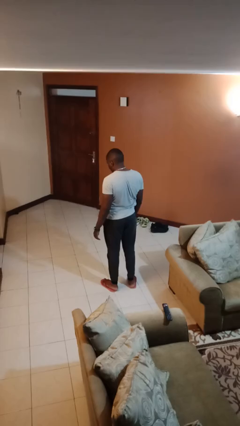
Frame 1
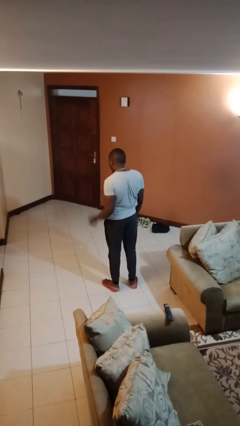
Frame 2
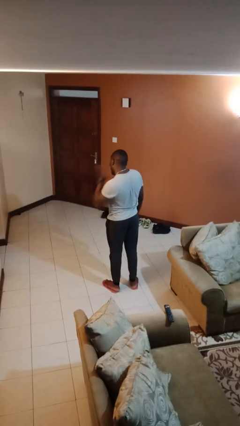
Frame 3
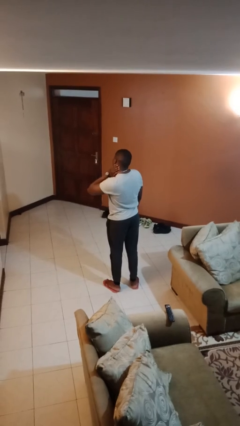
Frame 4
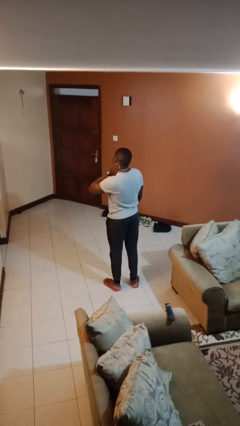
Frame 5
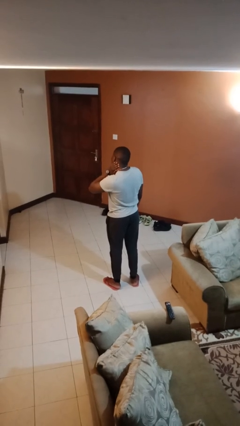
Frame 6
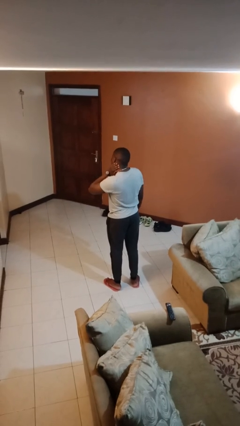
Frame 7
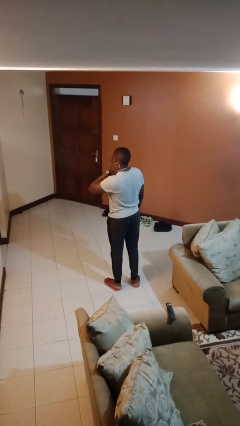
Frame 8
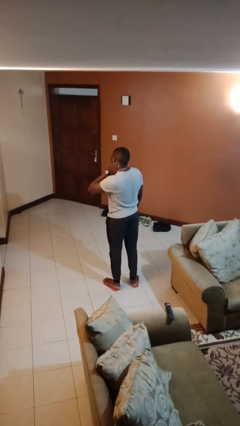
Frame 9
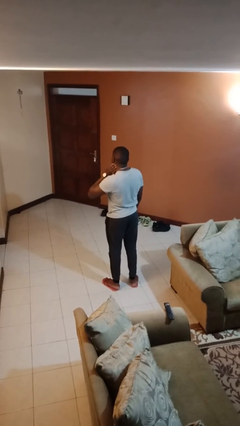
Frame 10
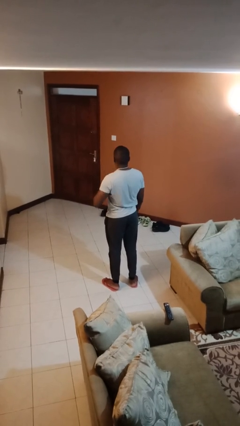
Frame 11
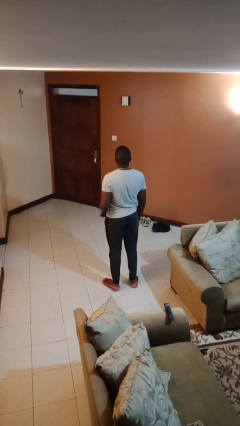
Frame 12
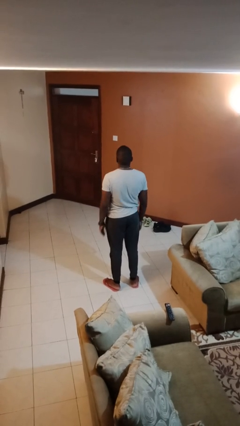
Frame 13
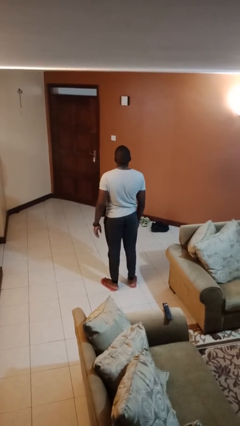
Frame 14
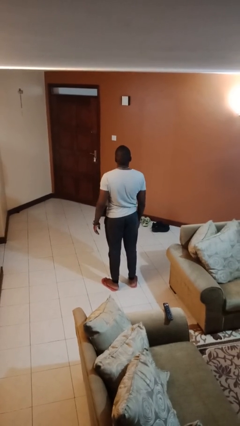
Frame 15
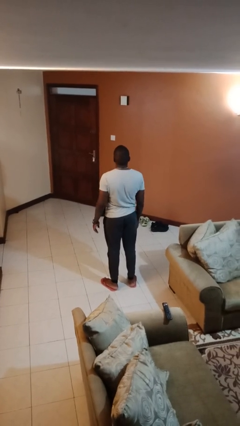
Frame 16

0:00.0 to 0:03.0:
person swats bug

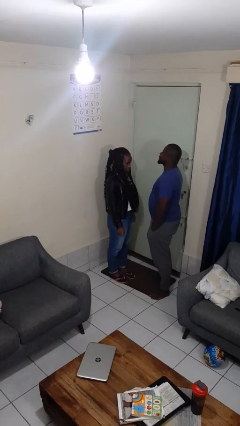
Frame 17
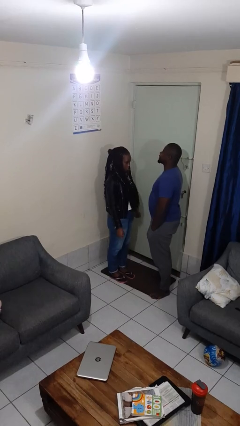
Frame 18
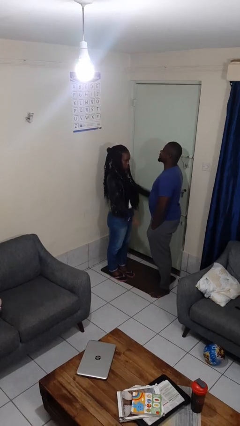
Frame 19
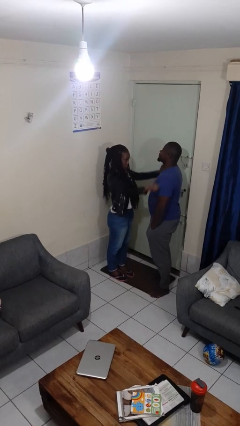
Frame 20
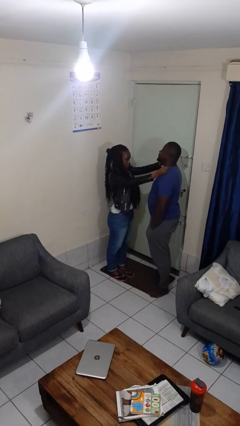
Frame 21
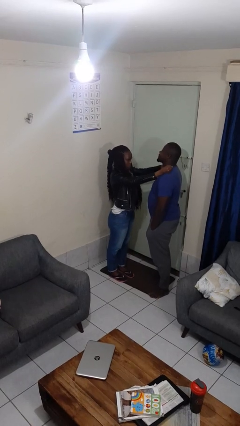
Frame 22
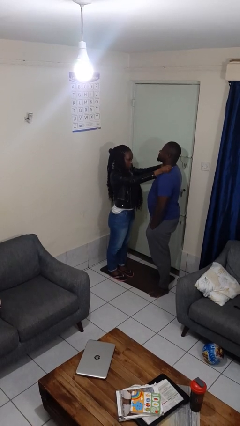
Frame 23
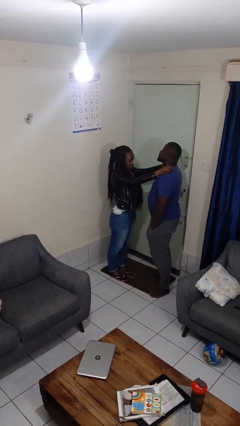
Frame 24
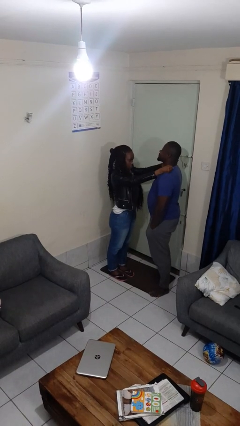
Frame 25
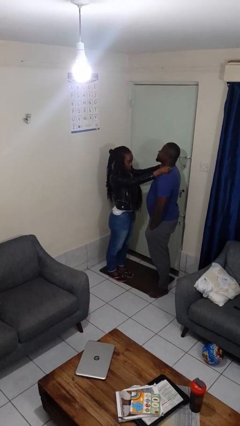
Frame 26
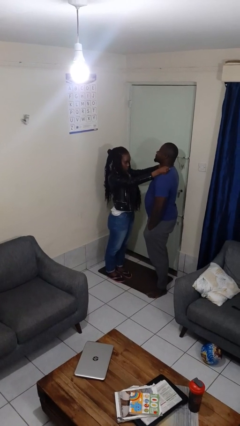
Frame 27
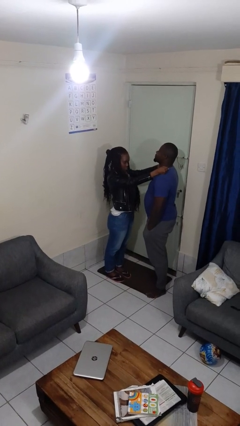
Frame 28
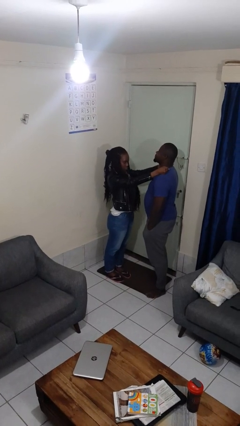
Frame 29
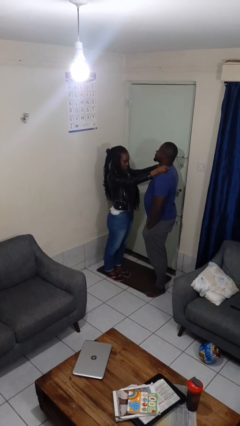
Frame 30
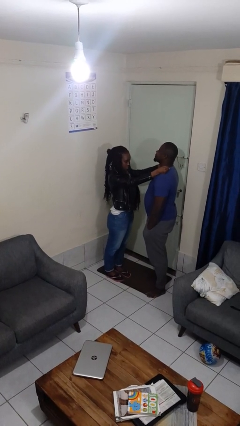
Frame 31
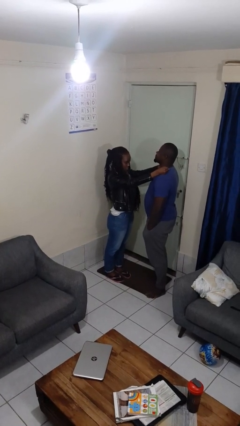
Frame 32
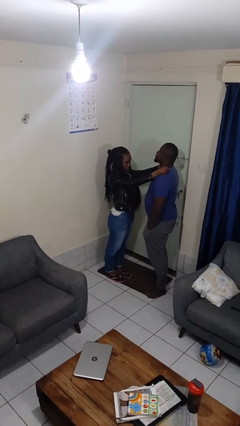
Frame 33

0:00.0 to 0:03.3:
person pounds shoulders of person

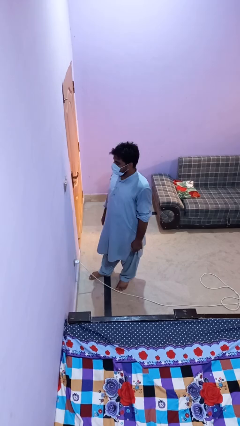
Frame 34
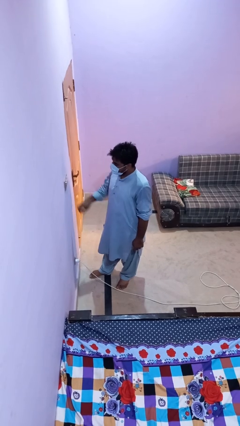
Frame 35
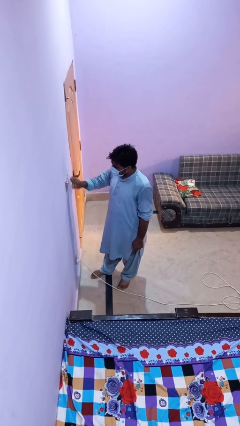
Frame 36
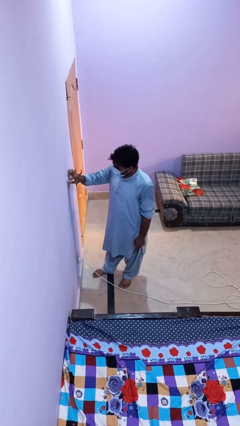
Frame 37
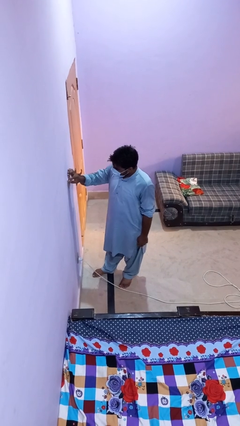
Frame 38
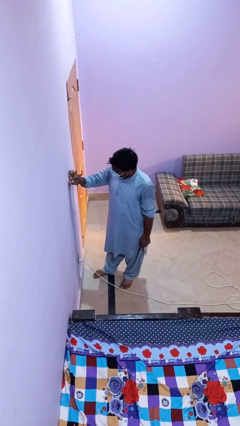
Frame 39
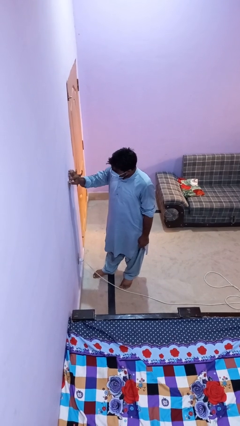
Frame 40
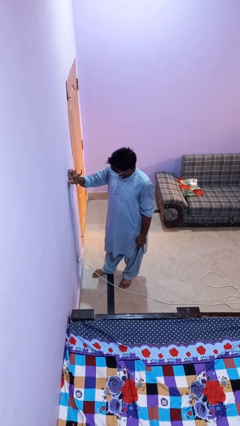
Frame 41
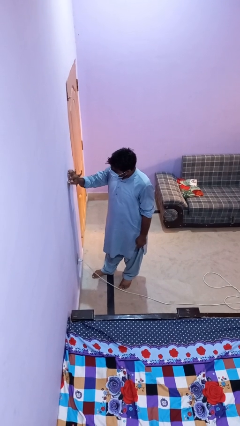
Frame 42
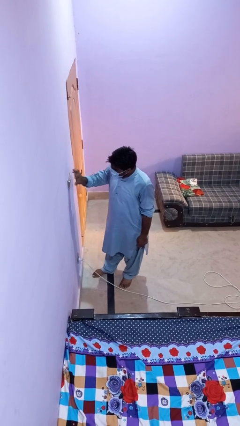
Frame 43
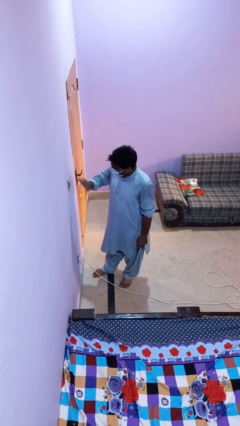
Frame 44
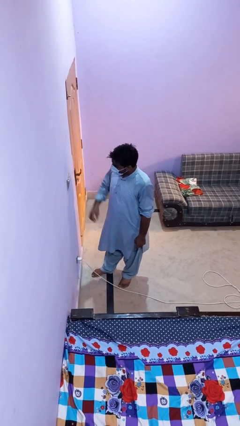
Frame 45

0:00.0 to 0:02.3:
person adjusts thermostat

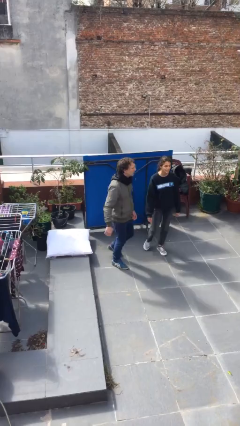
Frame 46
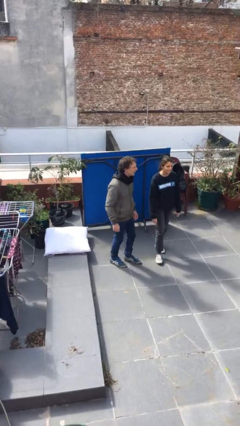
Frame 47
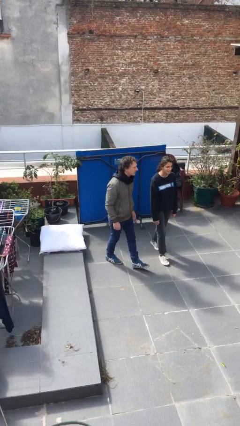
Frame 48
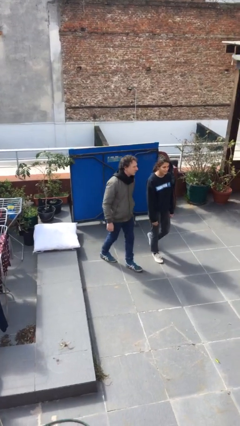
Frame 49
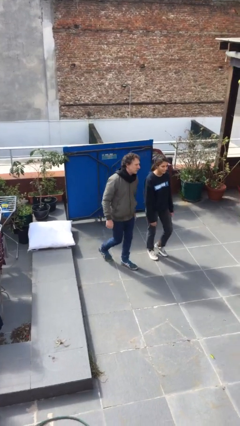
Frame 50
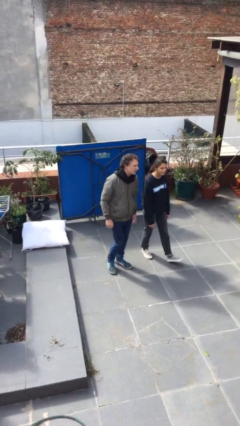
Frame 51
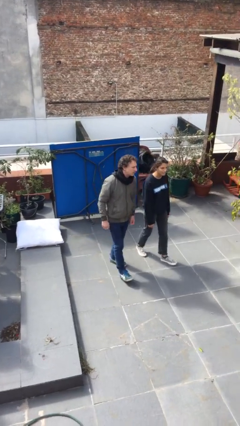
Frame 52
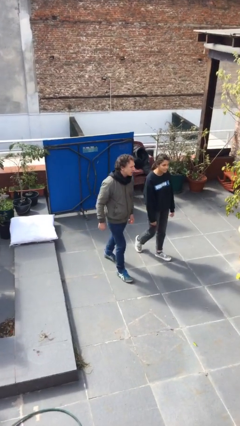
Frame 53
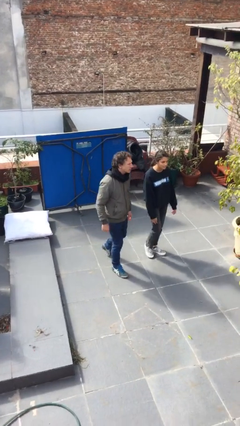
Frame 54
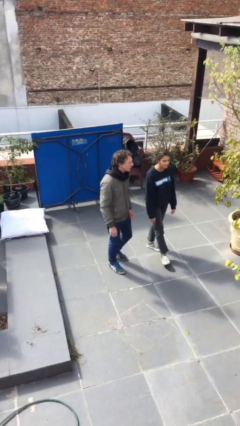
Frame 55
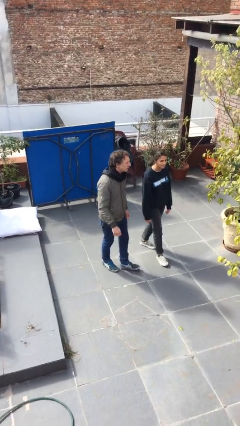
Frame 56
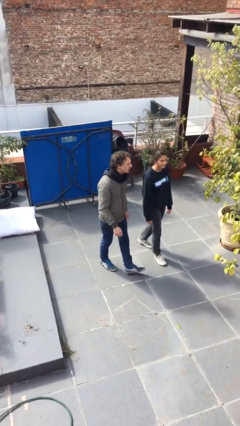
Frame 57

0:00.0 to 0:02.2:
person talks to person

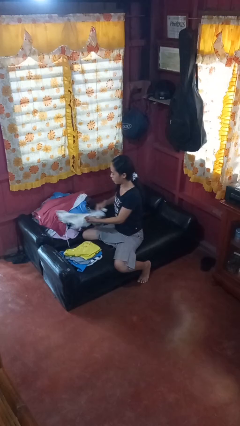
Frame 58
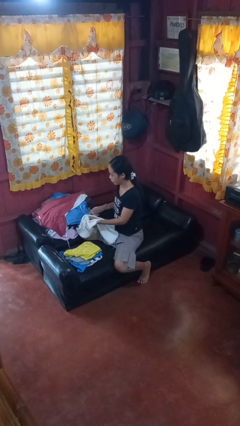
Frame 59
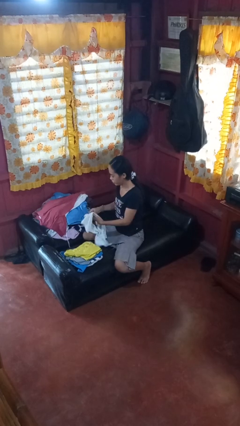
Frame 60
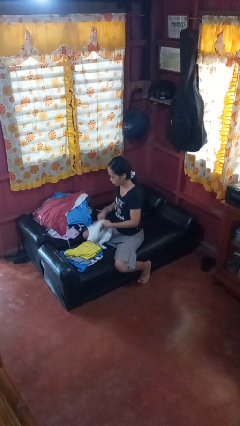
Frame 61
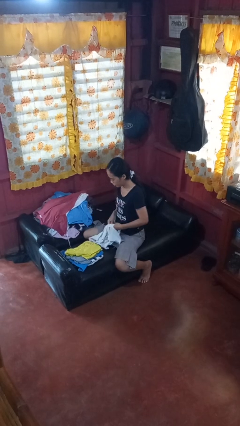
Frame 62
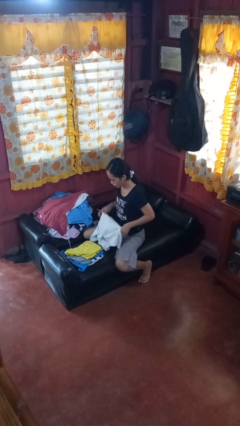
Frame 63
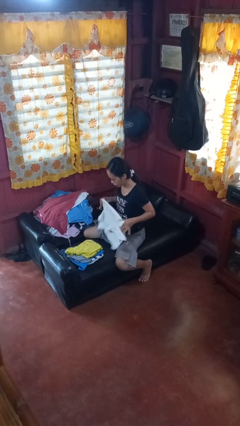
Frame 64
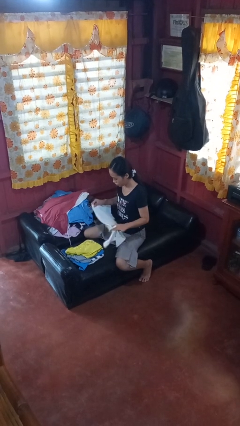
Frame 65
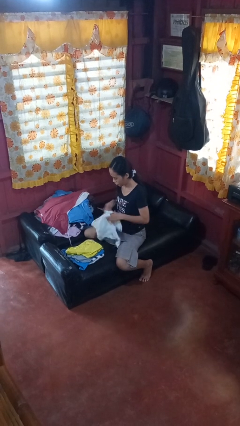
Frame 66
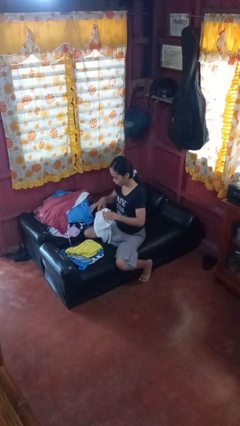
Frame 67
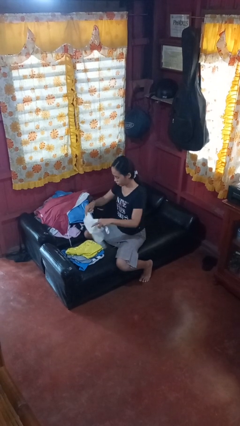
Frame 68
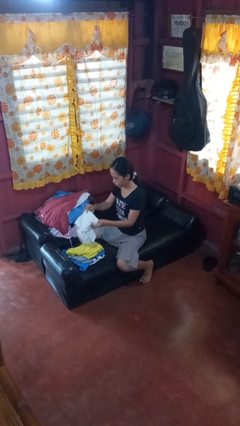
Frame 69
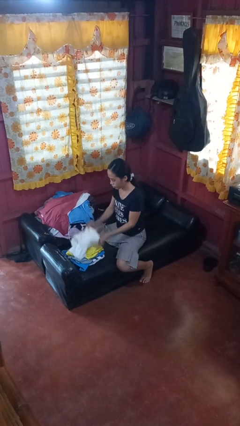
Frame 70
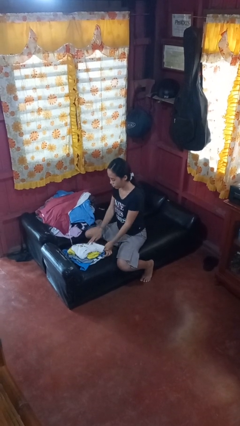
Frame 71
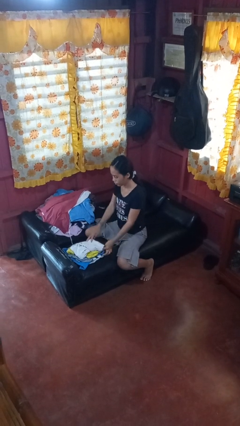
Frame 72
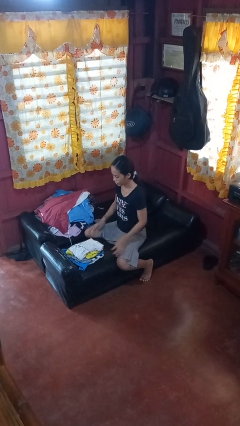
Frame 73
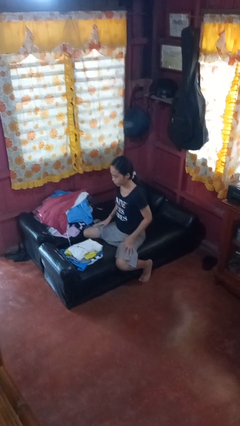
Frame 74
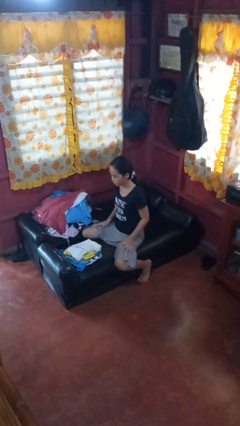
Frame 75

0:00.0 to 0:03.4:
person folds shirt

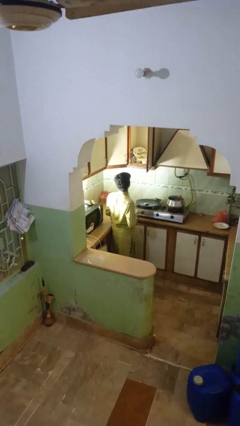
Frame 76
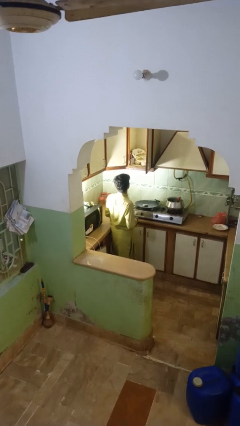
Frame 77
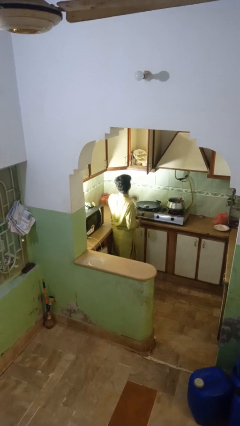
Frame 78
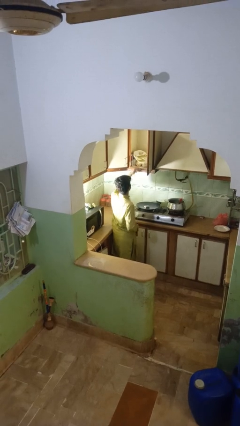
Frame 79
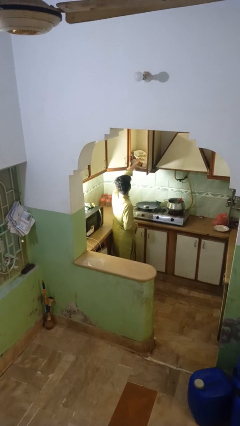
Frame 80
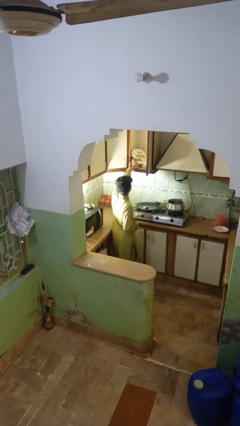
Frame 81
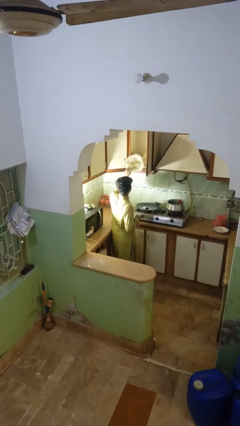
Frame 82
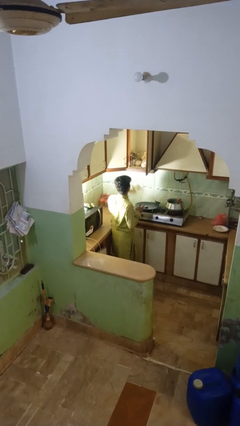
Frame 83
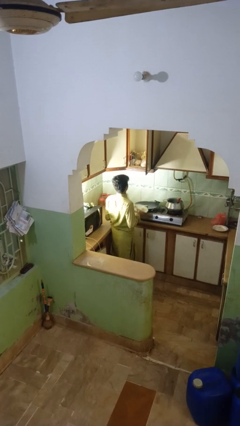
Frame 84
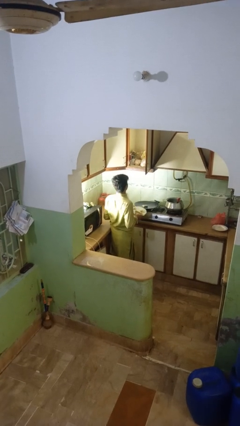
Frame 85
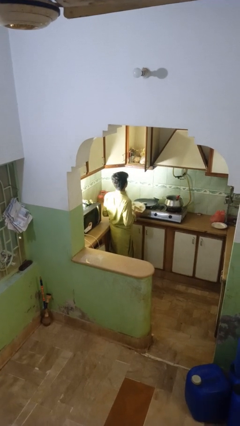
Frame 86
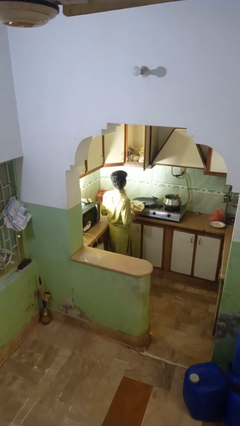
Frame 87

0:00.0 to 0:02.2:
person takes object from cabinet

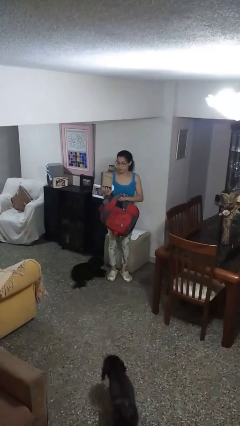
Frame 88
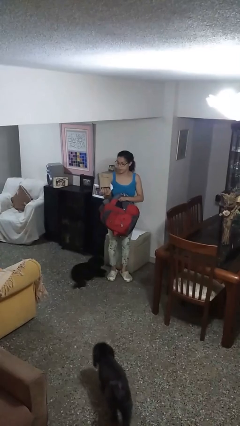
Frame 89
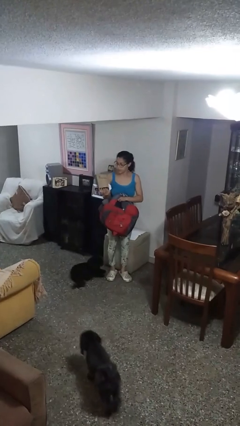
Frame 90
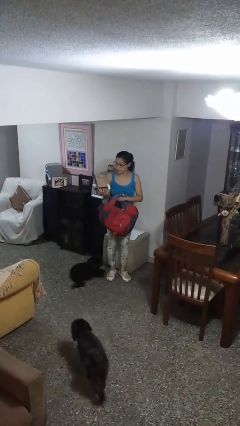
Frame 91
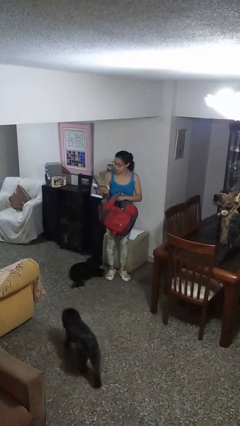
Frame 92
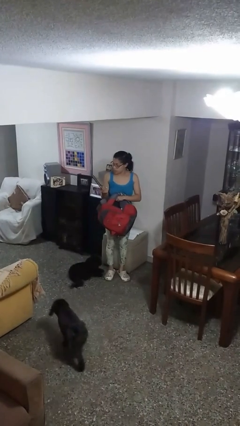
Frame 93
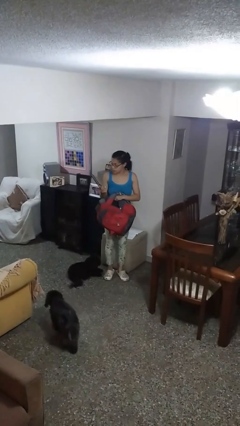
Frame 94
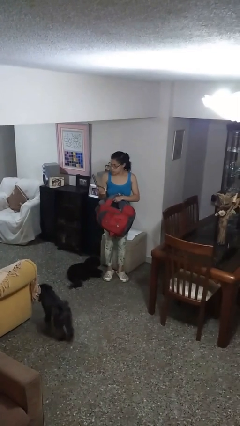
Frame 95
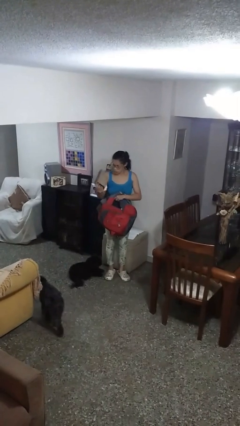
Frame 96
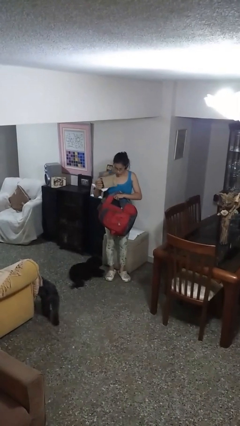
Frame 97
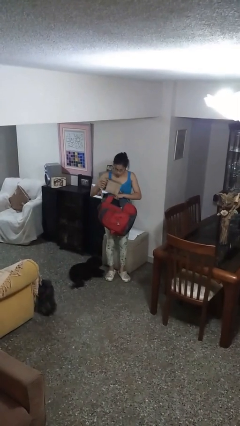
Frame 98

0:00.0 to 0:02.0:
person takes object from backpack
